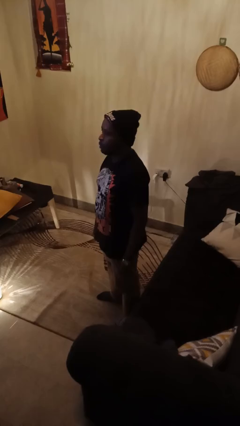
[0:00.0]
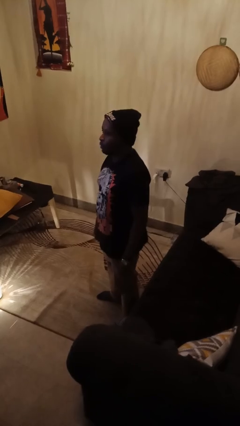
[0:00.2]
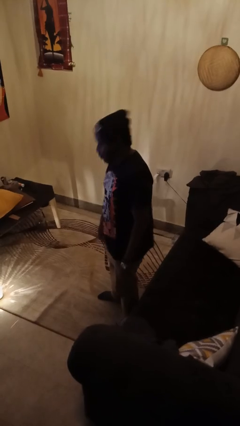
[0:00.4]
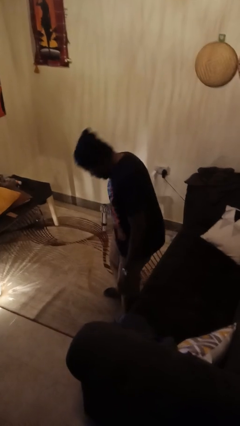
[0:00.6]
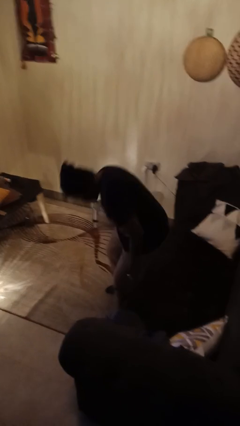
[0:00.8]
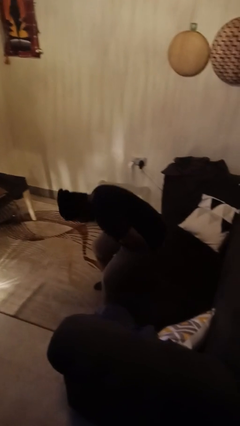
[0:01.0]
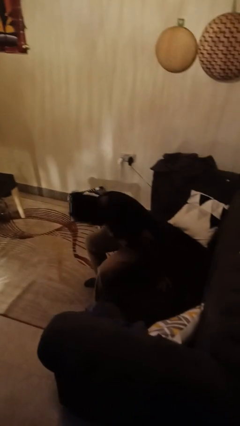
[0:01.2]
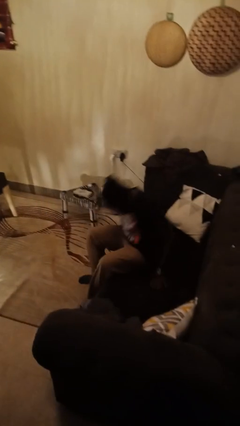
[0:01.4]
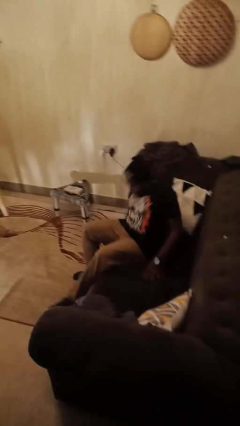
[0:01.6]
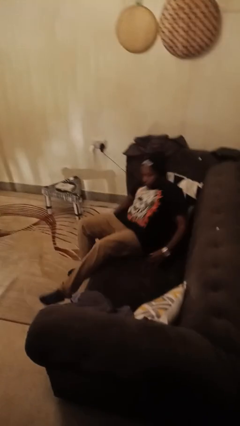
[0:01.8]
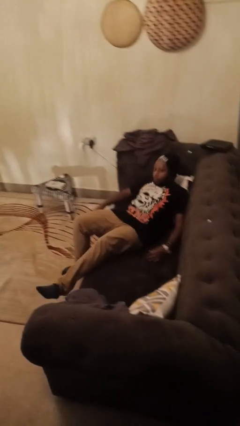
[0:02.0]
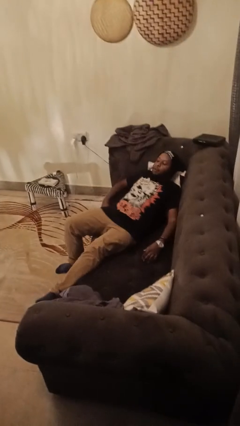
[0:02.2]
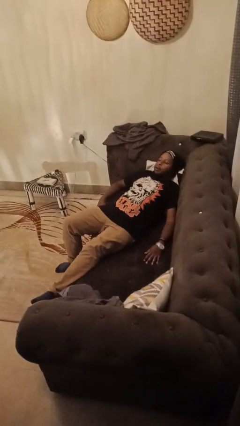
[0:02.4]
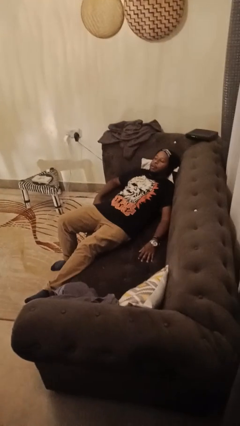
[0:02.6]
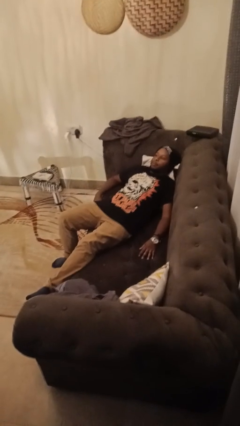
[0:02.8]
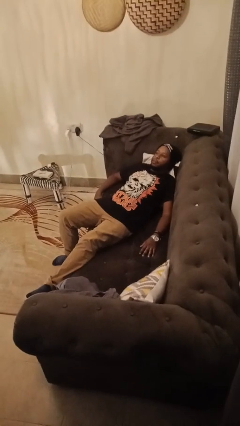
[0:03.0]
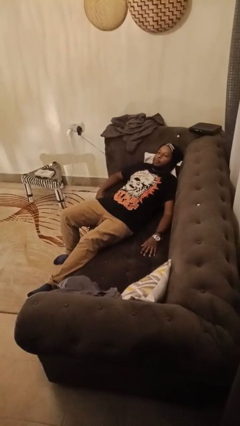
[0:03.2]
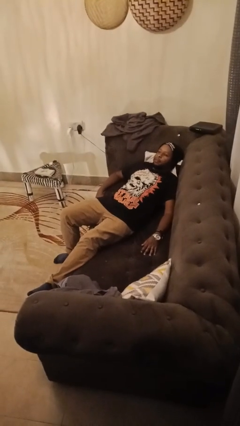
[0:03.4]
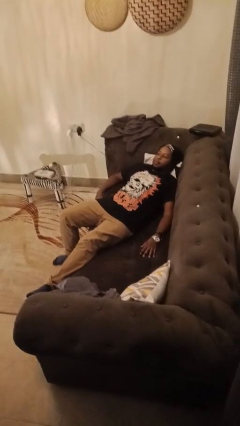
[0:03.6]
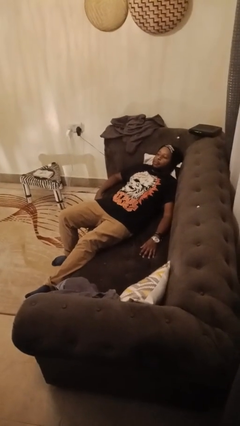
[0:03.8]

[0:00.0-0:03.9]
person lies down on couch

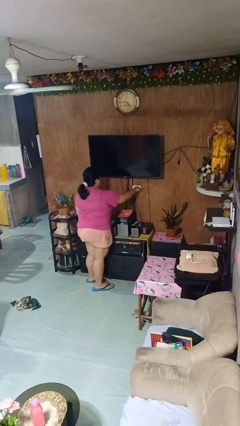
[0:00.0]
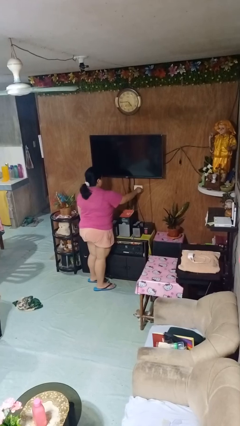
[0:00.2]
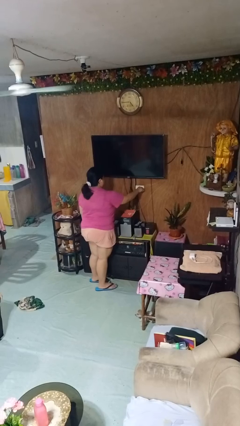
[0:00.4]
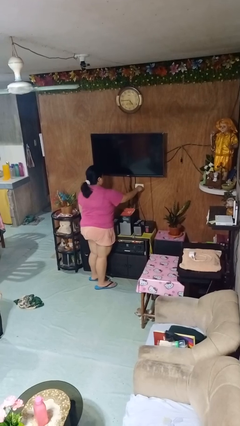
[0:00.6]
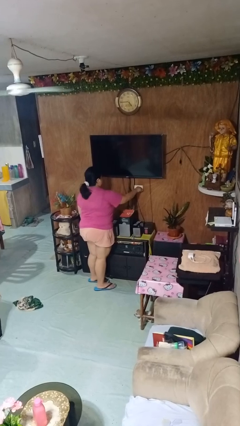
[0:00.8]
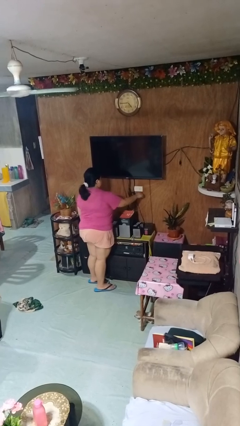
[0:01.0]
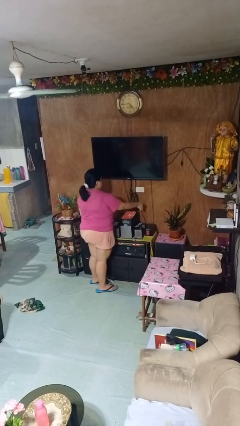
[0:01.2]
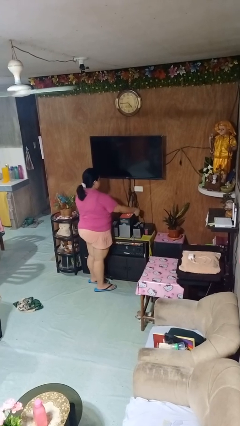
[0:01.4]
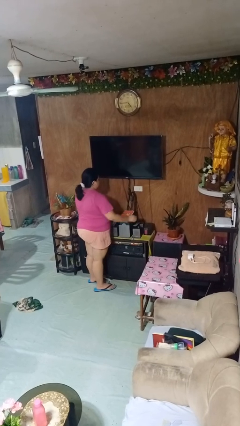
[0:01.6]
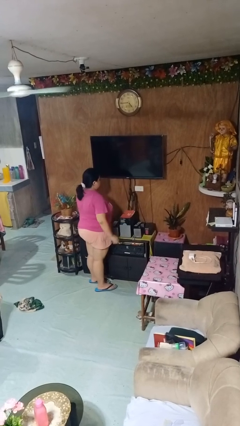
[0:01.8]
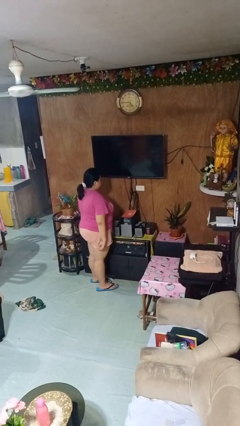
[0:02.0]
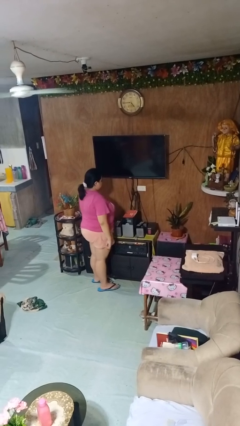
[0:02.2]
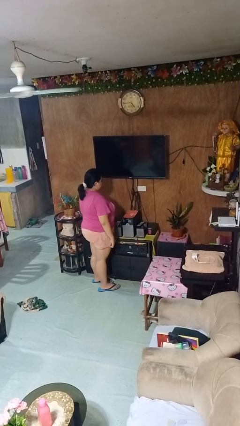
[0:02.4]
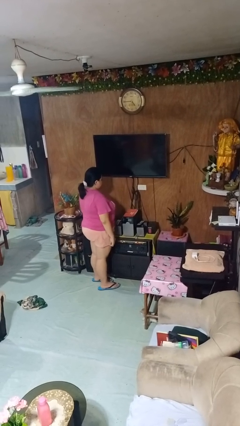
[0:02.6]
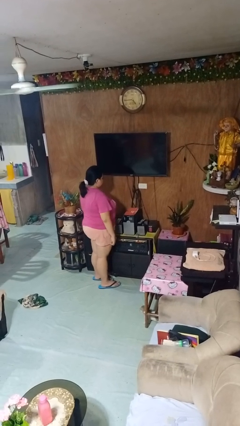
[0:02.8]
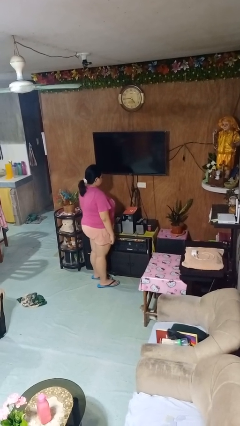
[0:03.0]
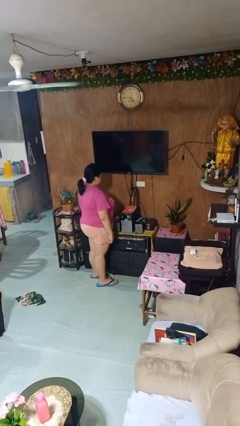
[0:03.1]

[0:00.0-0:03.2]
person unplugs from electrical socket

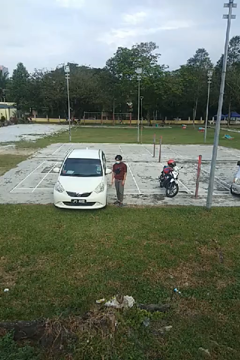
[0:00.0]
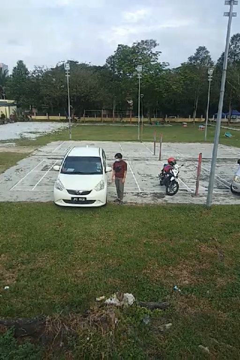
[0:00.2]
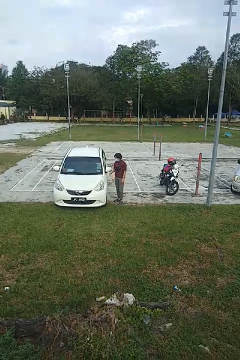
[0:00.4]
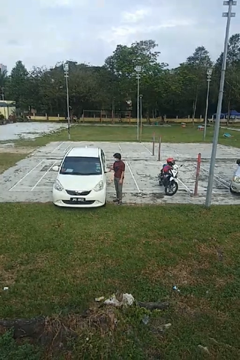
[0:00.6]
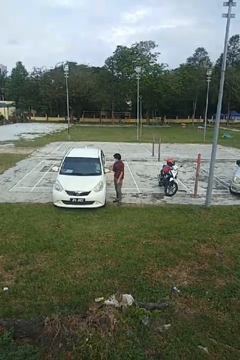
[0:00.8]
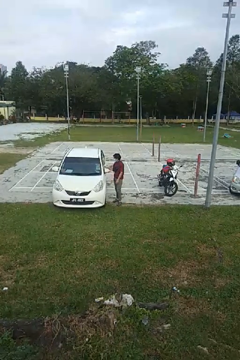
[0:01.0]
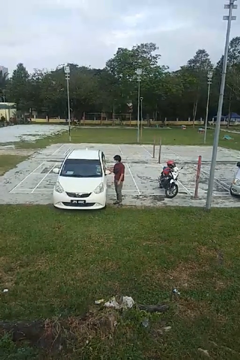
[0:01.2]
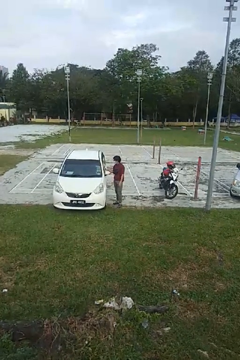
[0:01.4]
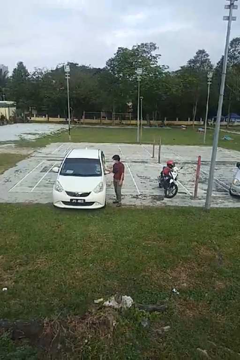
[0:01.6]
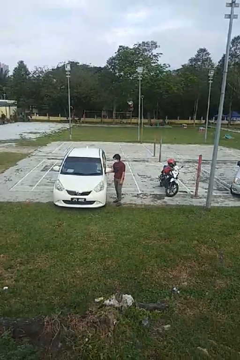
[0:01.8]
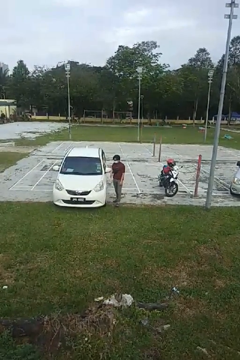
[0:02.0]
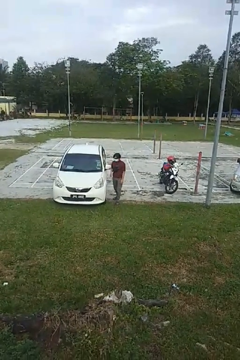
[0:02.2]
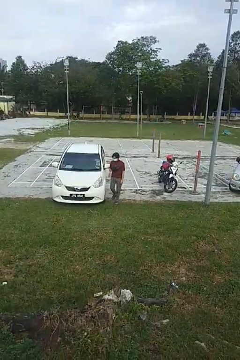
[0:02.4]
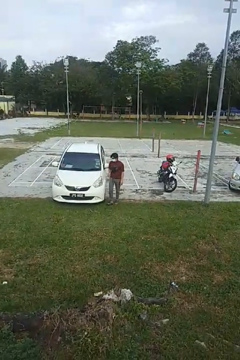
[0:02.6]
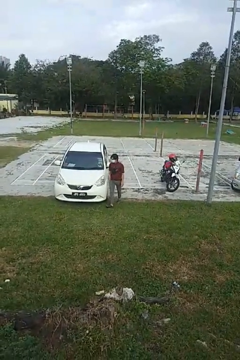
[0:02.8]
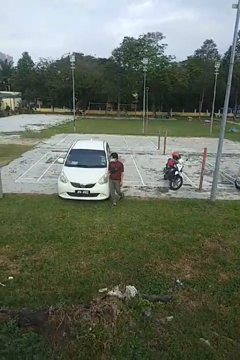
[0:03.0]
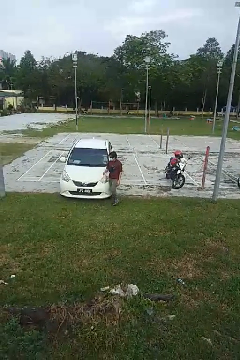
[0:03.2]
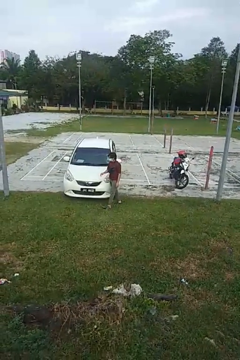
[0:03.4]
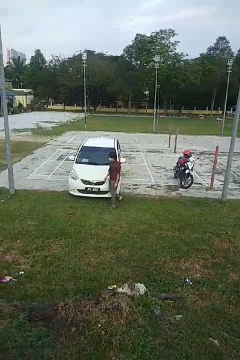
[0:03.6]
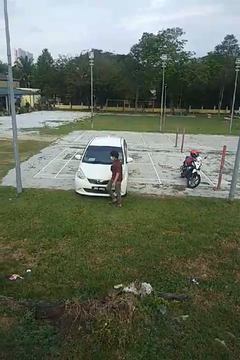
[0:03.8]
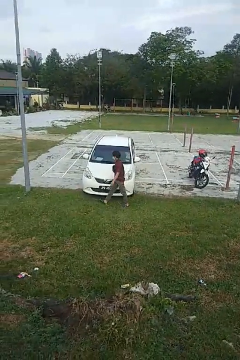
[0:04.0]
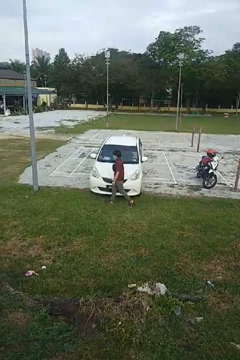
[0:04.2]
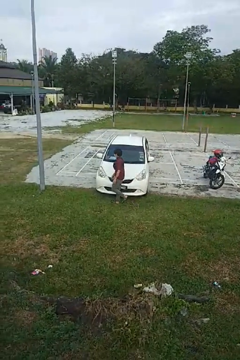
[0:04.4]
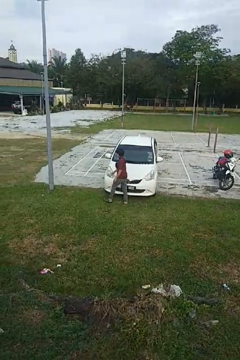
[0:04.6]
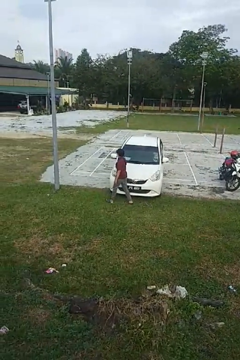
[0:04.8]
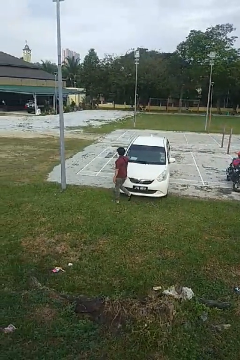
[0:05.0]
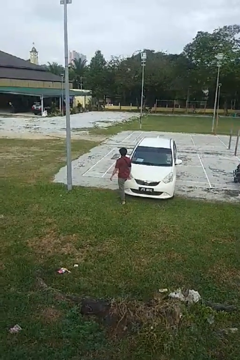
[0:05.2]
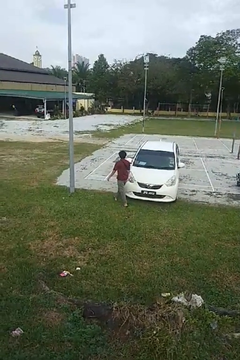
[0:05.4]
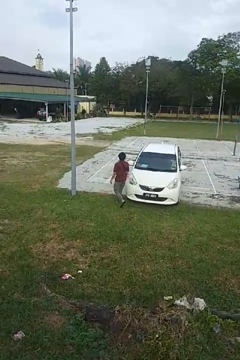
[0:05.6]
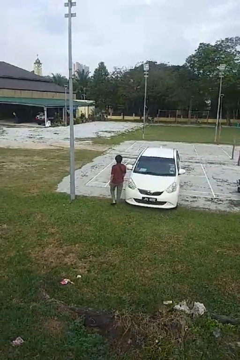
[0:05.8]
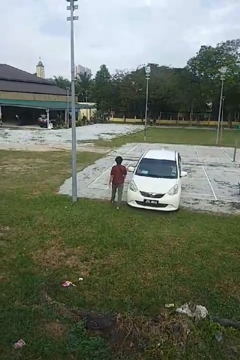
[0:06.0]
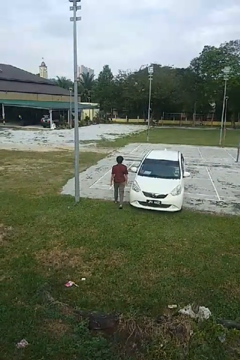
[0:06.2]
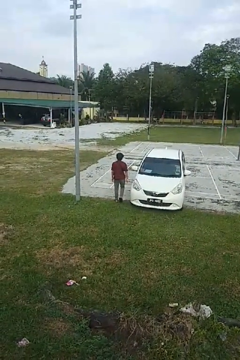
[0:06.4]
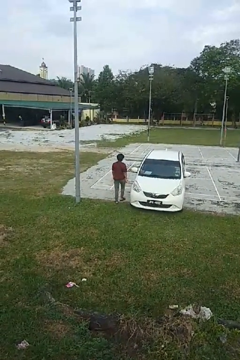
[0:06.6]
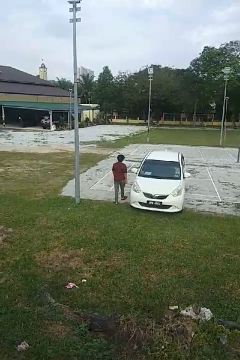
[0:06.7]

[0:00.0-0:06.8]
person walks around car

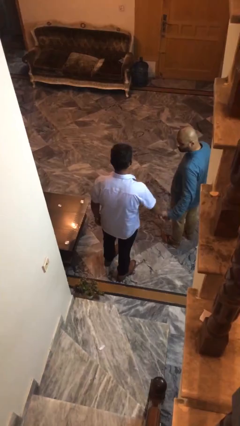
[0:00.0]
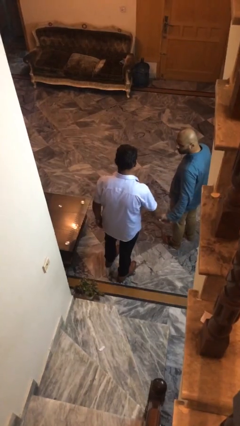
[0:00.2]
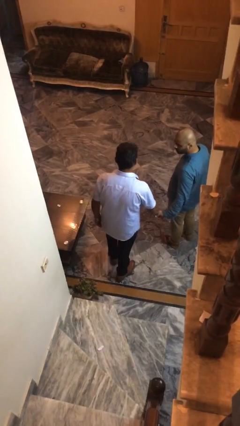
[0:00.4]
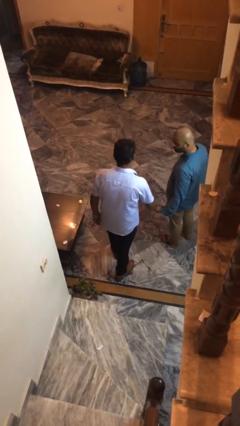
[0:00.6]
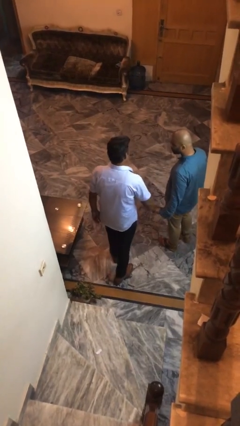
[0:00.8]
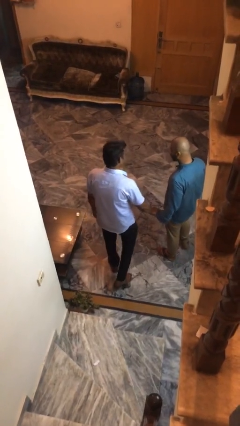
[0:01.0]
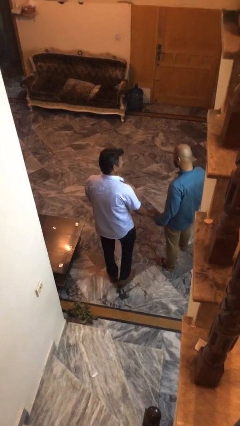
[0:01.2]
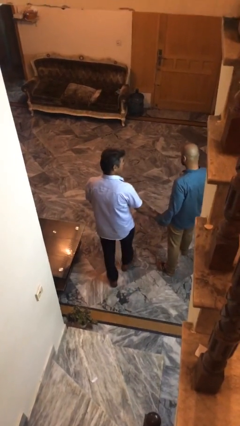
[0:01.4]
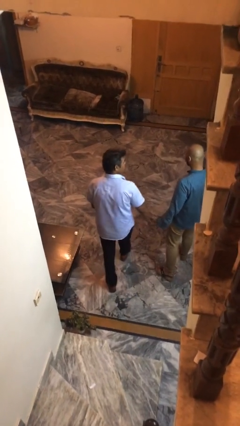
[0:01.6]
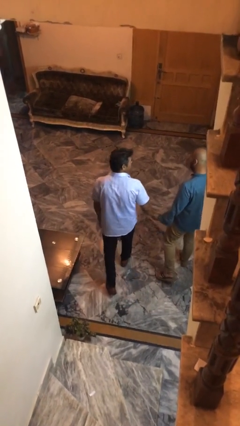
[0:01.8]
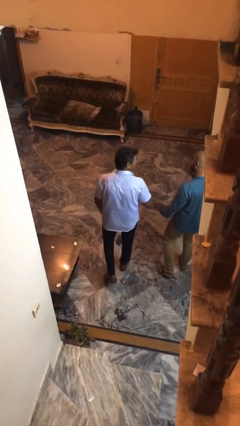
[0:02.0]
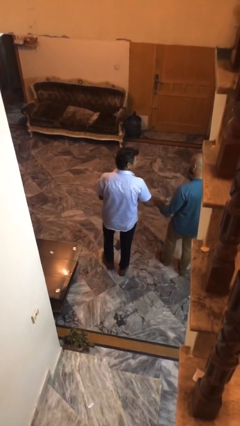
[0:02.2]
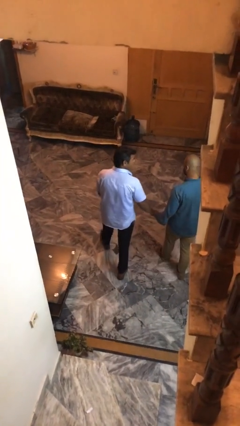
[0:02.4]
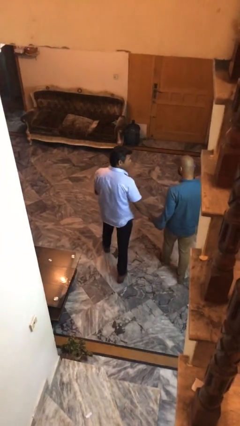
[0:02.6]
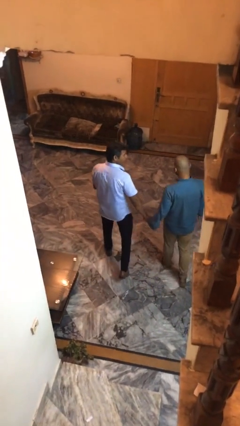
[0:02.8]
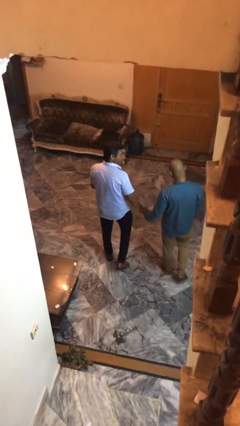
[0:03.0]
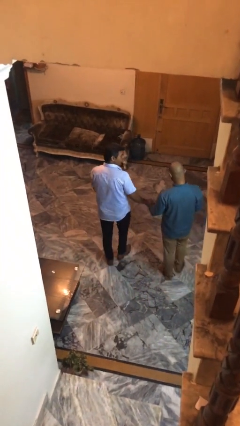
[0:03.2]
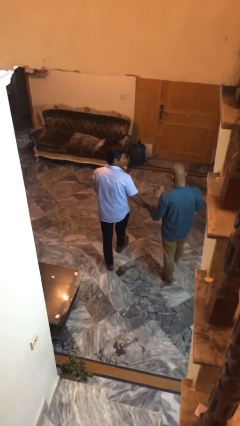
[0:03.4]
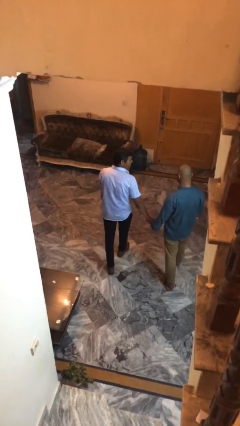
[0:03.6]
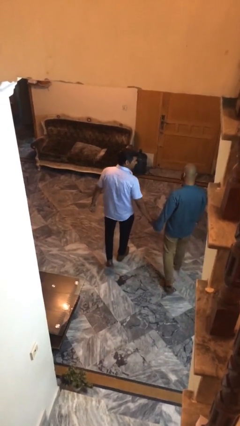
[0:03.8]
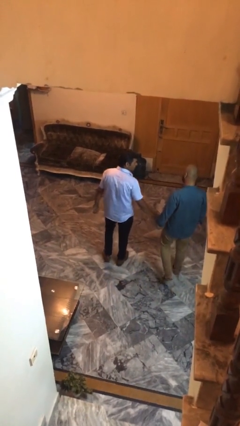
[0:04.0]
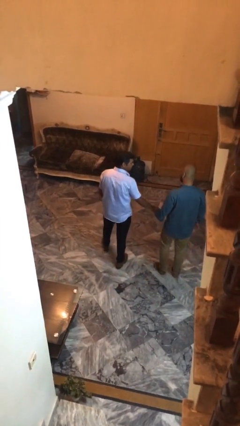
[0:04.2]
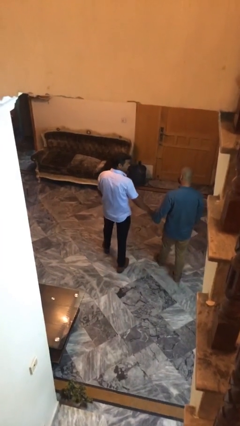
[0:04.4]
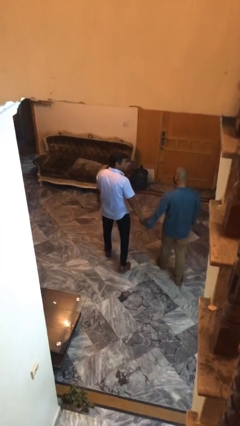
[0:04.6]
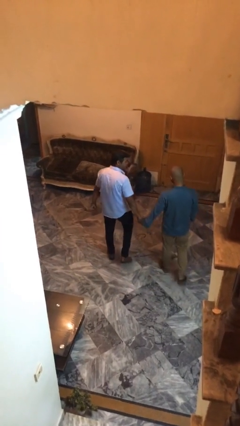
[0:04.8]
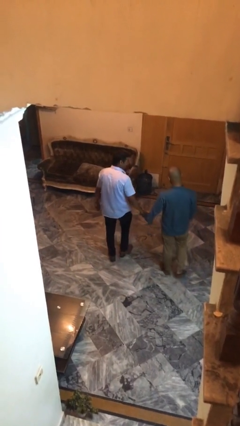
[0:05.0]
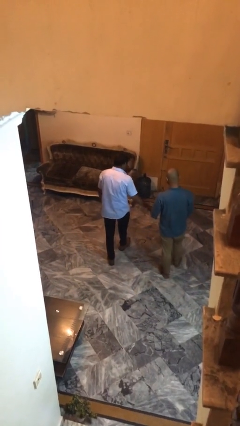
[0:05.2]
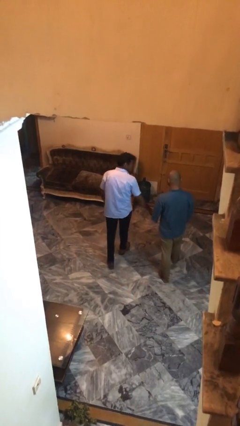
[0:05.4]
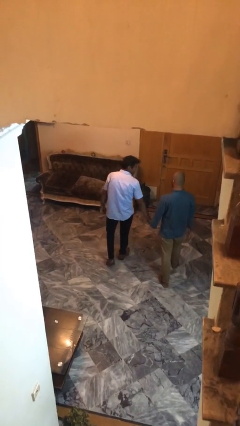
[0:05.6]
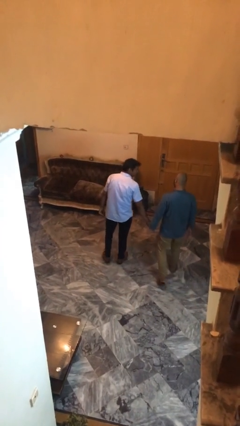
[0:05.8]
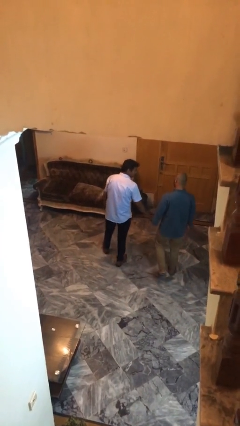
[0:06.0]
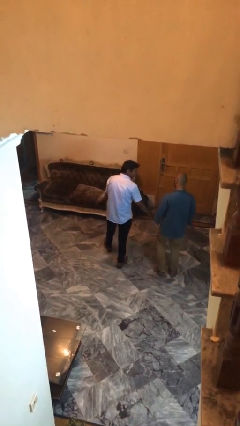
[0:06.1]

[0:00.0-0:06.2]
person holds hand
